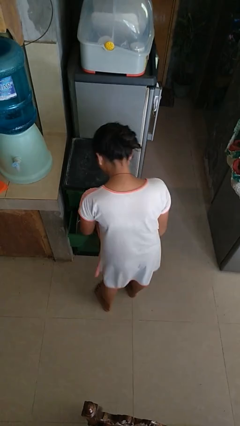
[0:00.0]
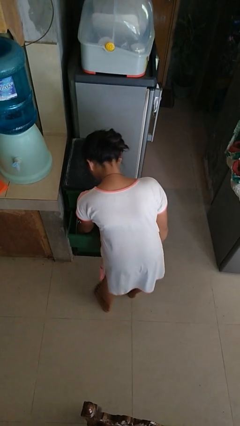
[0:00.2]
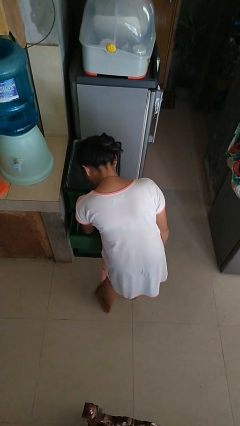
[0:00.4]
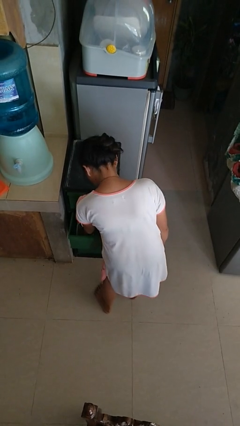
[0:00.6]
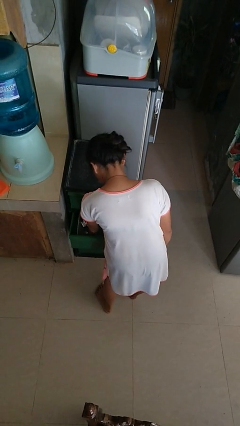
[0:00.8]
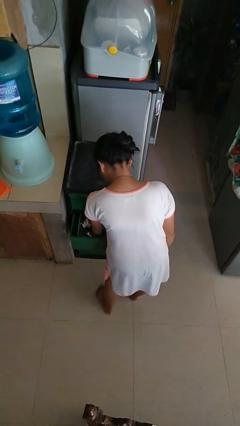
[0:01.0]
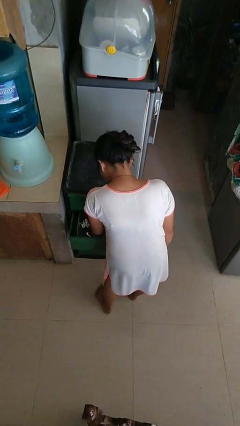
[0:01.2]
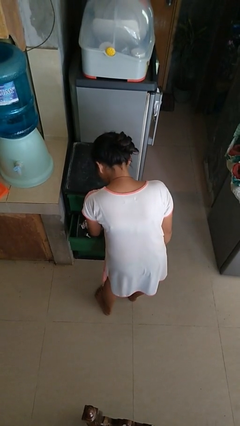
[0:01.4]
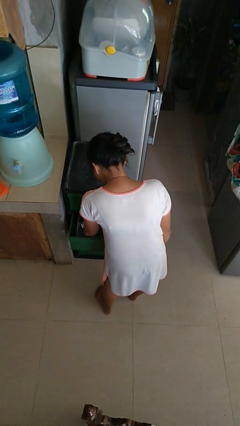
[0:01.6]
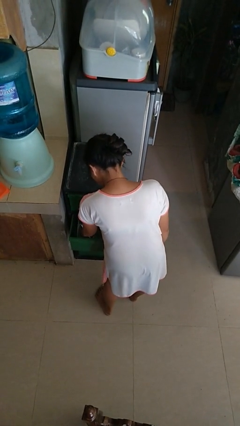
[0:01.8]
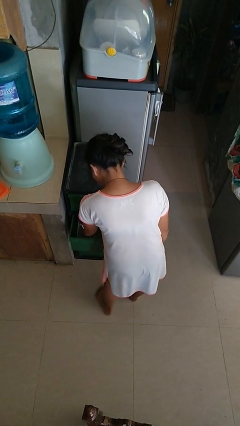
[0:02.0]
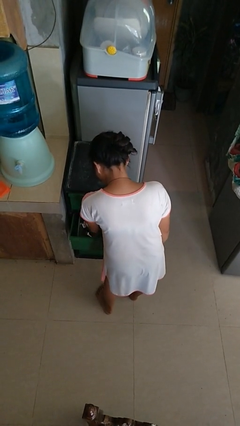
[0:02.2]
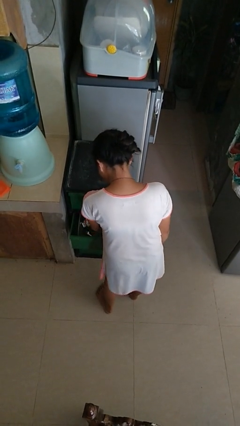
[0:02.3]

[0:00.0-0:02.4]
person searches in kitchen drawer

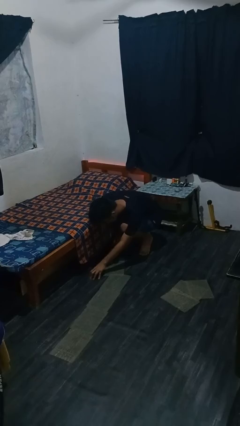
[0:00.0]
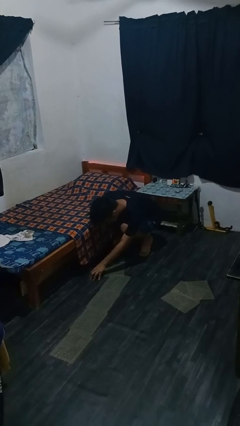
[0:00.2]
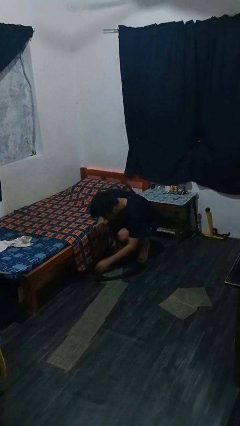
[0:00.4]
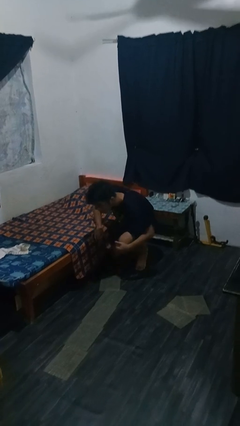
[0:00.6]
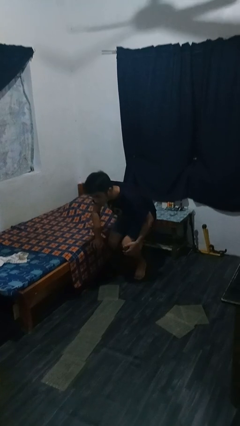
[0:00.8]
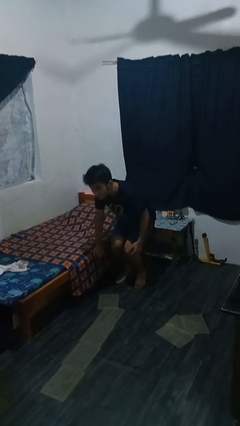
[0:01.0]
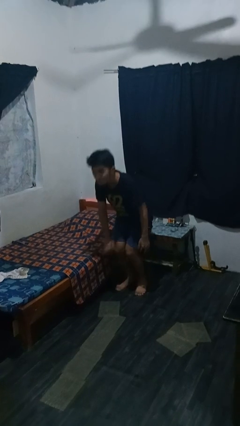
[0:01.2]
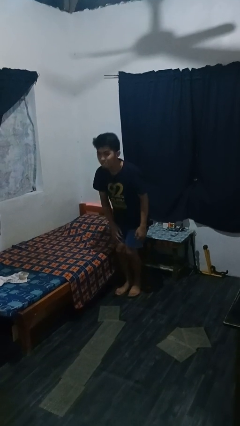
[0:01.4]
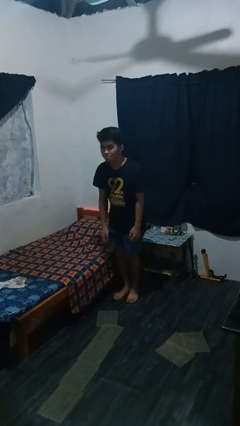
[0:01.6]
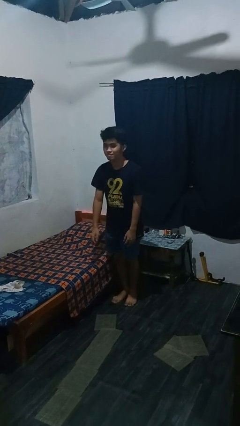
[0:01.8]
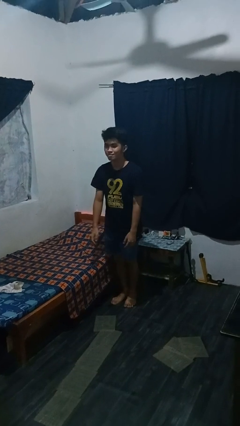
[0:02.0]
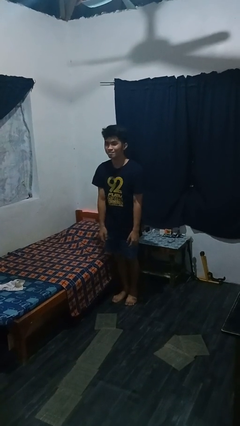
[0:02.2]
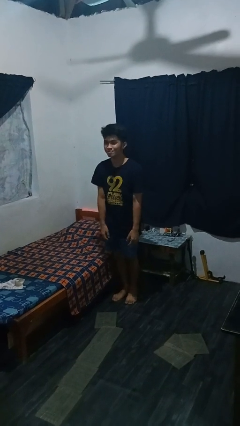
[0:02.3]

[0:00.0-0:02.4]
person stands up from floor

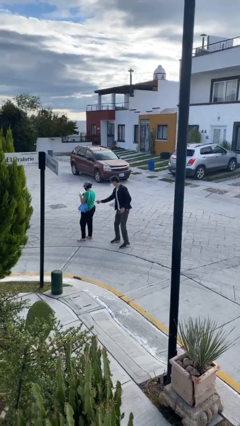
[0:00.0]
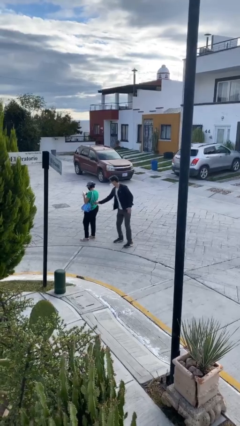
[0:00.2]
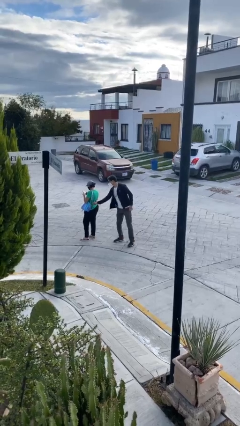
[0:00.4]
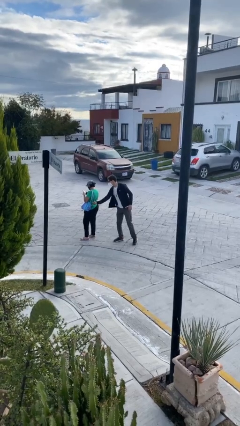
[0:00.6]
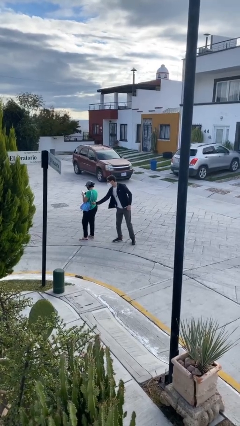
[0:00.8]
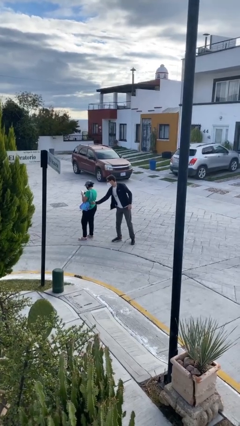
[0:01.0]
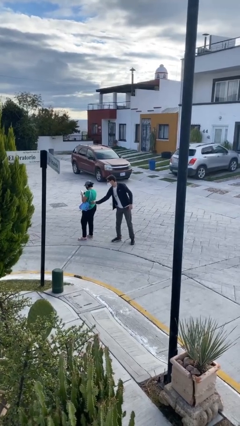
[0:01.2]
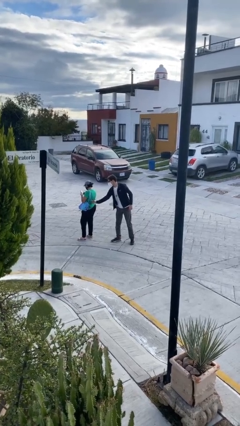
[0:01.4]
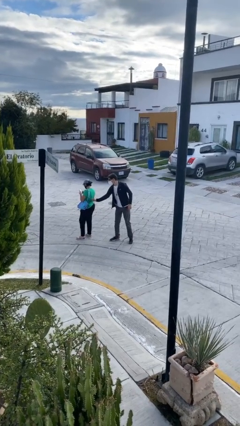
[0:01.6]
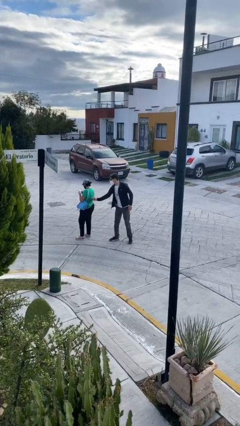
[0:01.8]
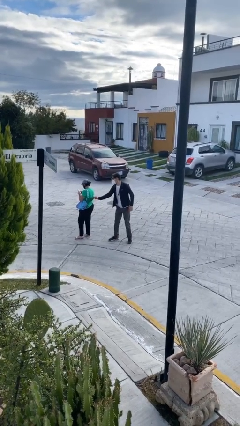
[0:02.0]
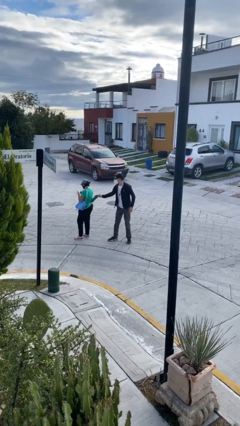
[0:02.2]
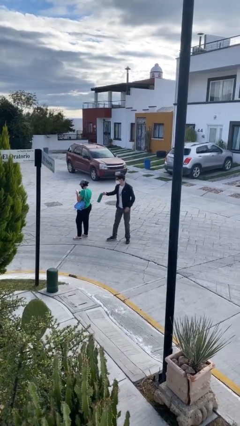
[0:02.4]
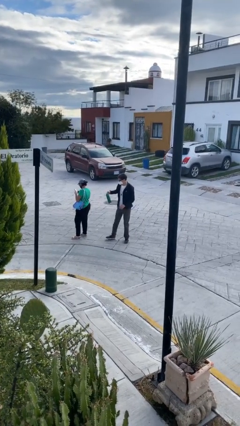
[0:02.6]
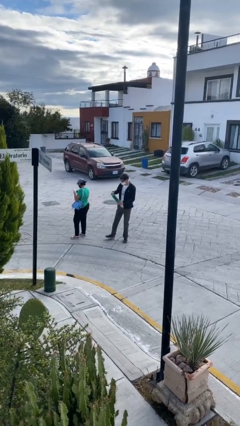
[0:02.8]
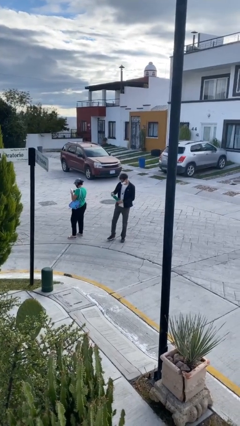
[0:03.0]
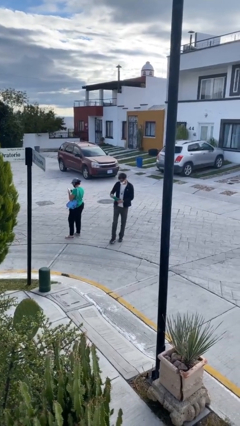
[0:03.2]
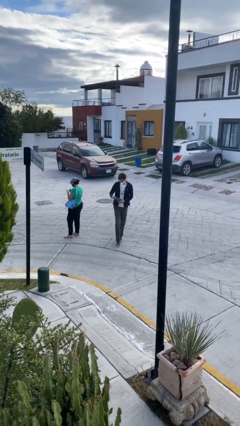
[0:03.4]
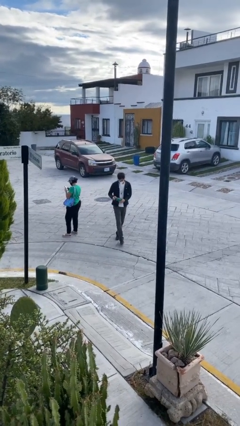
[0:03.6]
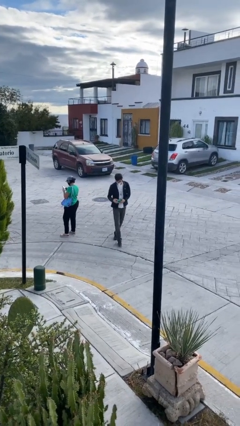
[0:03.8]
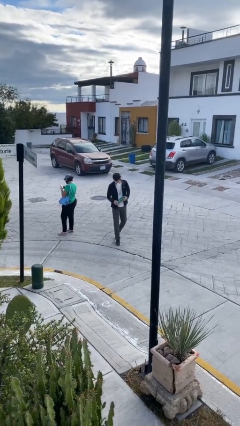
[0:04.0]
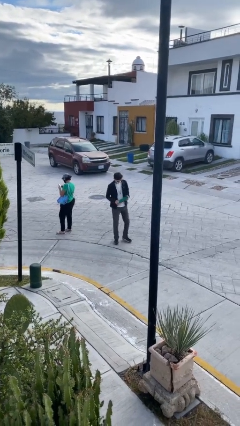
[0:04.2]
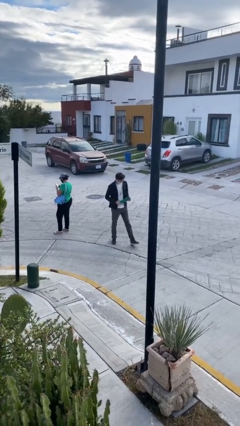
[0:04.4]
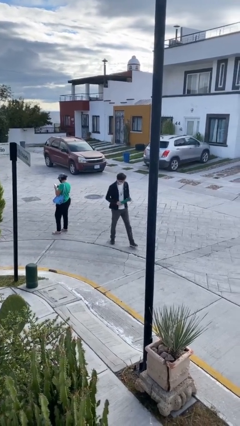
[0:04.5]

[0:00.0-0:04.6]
person steals object from person

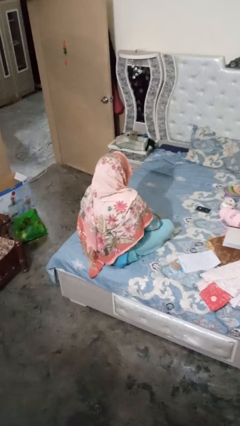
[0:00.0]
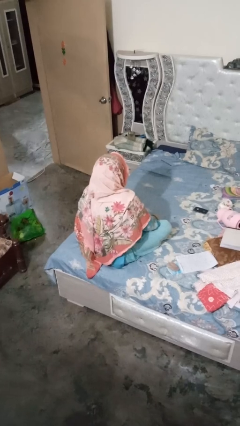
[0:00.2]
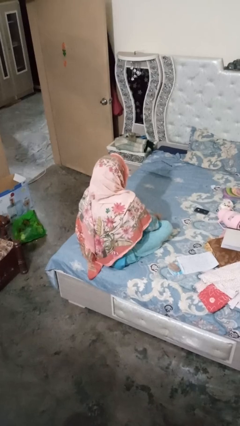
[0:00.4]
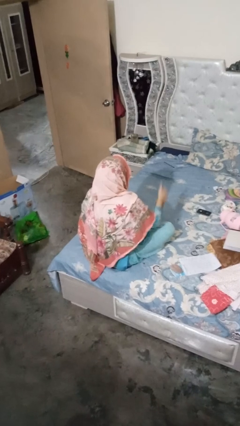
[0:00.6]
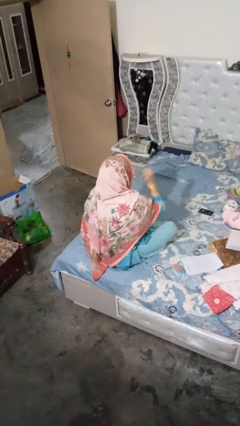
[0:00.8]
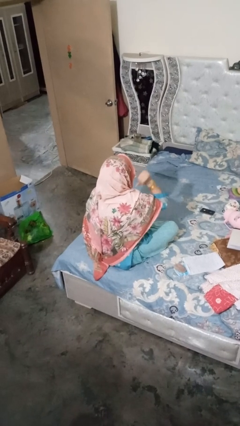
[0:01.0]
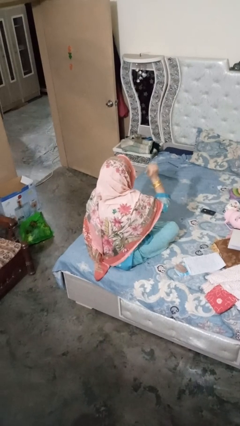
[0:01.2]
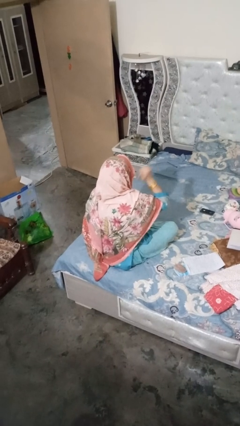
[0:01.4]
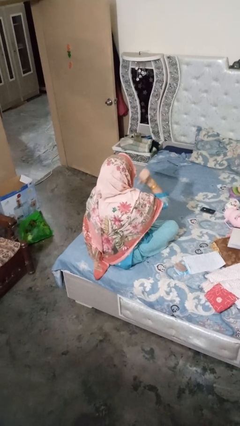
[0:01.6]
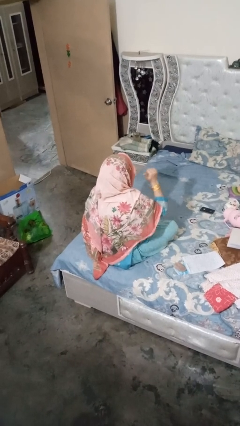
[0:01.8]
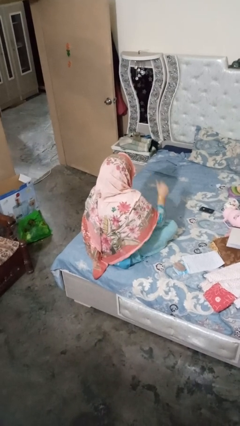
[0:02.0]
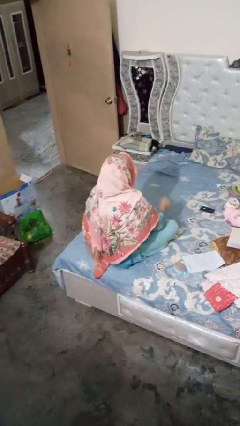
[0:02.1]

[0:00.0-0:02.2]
person gestures behind me

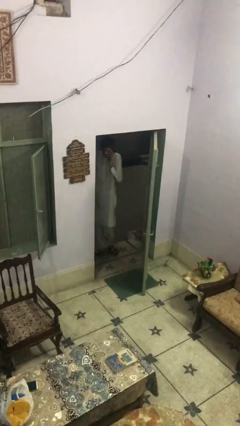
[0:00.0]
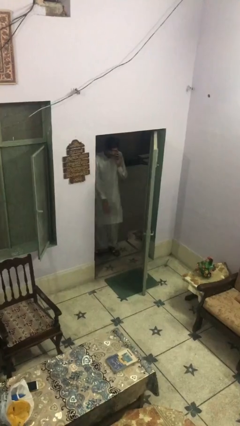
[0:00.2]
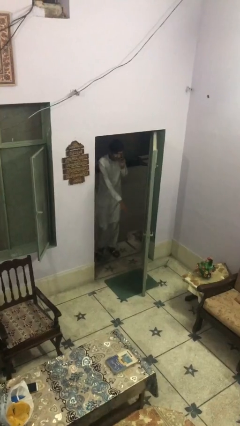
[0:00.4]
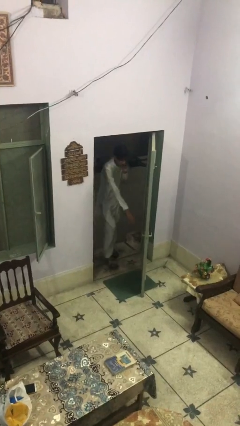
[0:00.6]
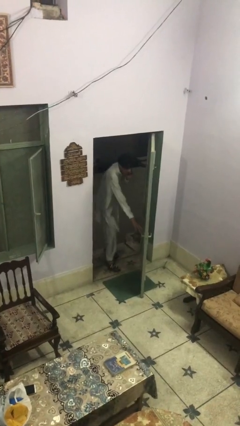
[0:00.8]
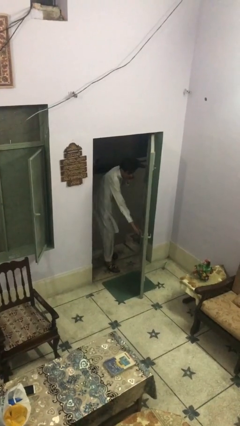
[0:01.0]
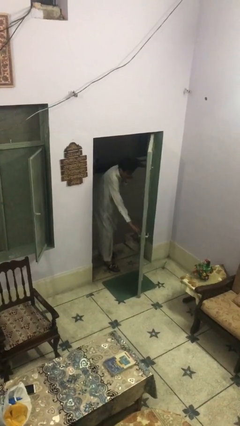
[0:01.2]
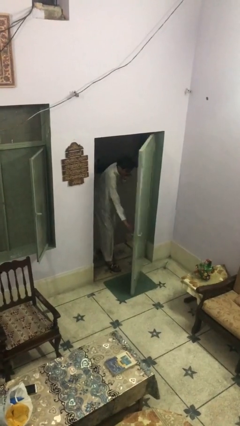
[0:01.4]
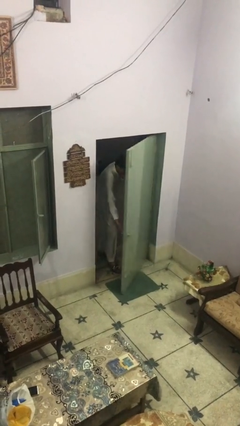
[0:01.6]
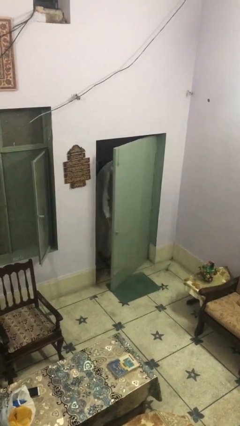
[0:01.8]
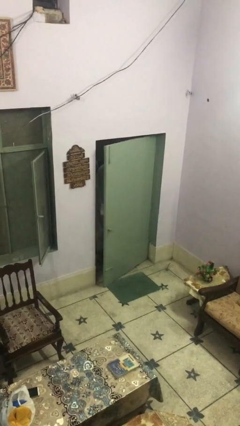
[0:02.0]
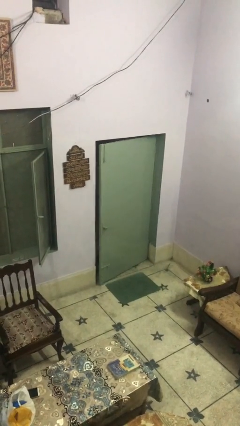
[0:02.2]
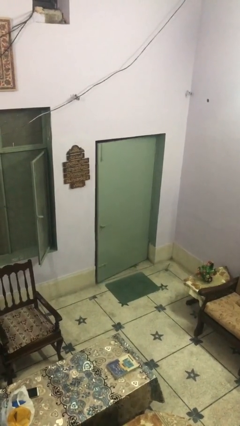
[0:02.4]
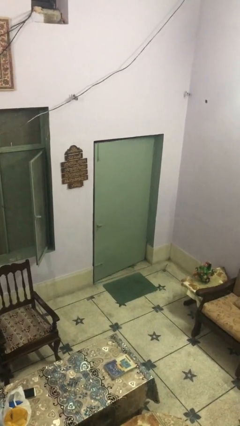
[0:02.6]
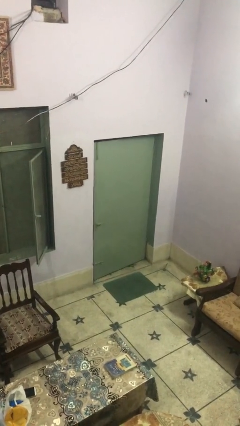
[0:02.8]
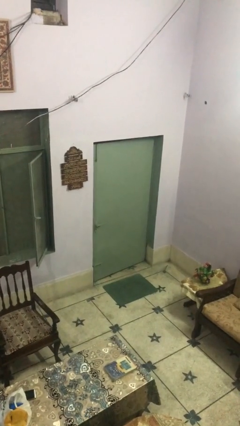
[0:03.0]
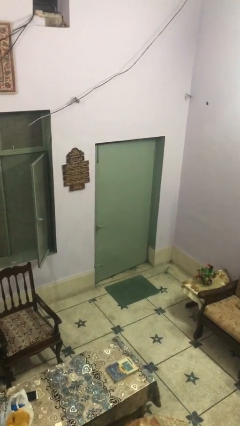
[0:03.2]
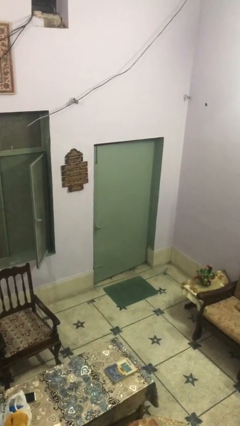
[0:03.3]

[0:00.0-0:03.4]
person closes facility door

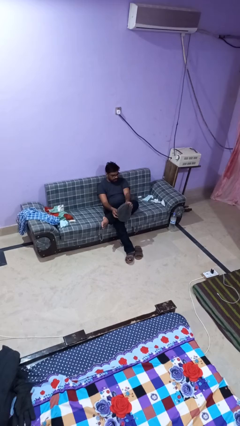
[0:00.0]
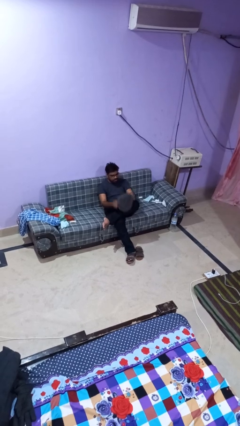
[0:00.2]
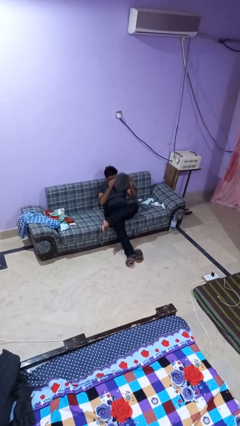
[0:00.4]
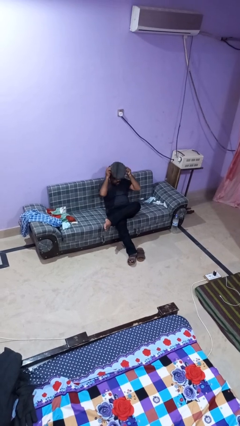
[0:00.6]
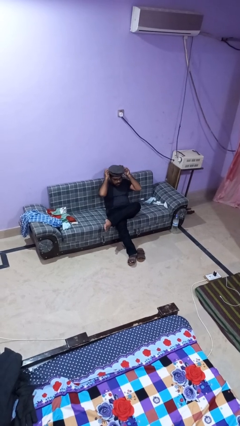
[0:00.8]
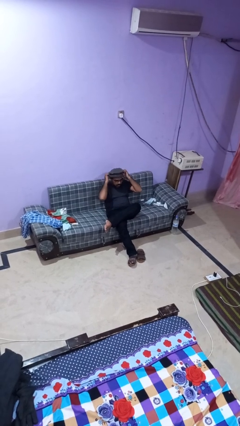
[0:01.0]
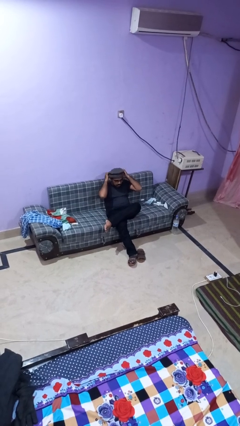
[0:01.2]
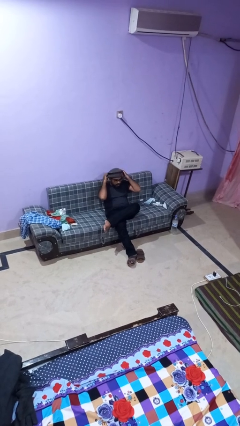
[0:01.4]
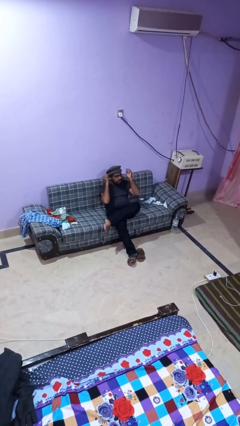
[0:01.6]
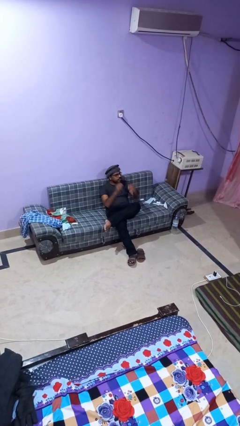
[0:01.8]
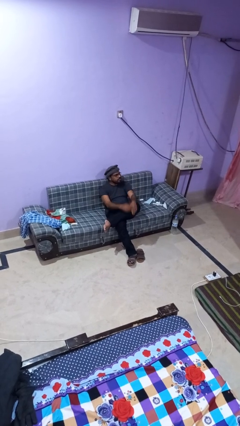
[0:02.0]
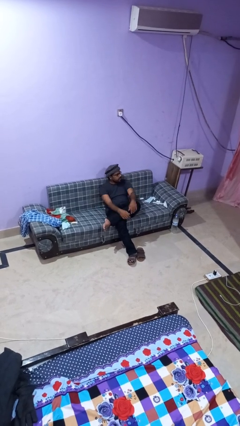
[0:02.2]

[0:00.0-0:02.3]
person puts on hat

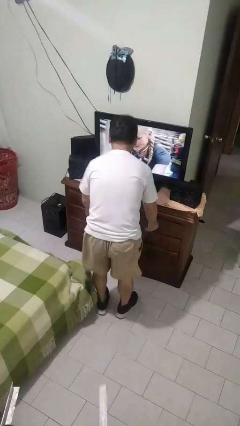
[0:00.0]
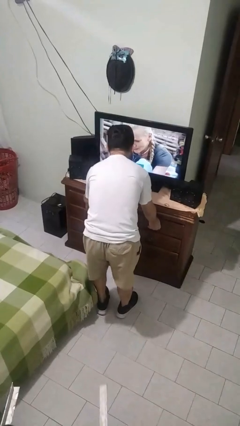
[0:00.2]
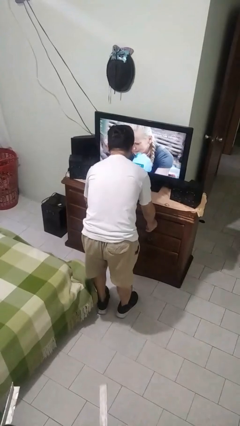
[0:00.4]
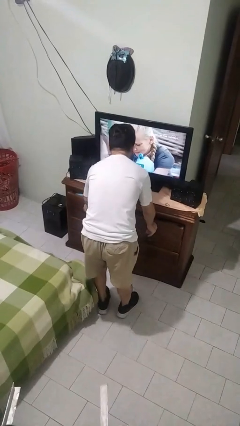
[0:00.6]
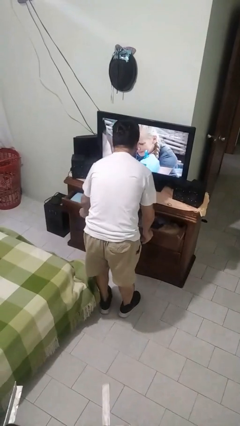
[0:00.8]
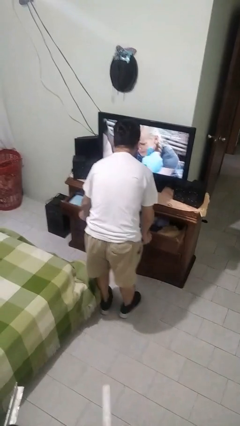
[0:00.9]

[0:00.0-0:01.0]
person opens dresser drawer
